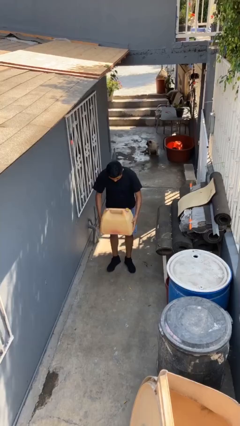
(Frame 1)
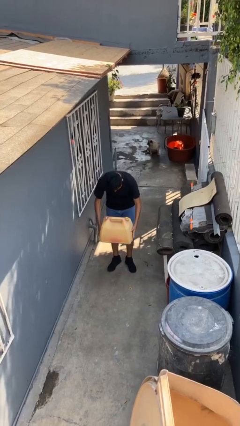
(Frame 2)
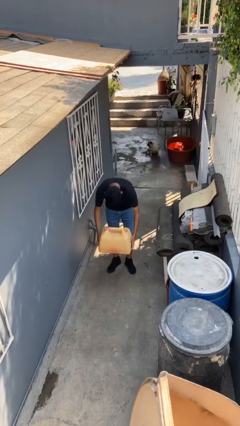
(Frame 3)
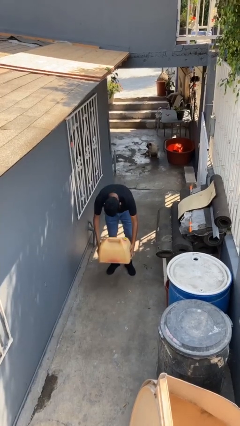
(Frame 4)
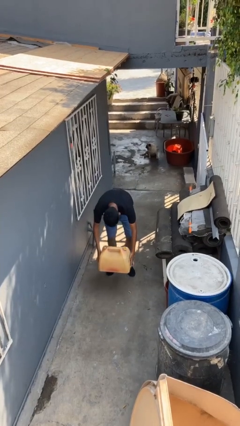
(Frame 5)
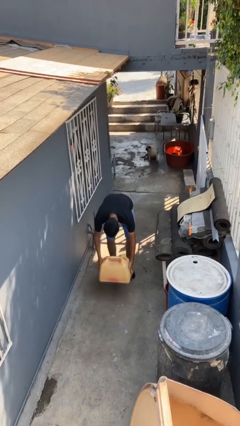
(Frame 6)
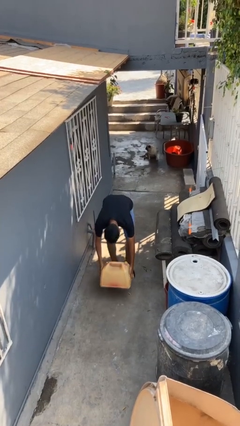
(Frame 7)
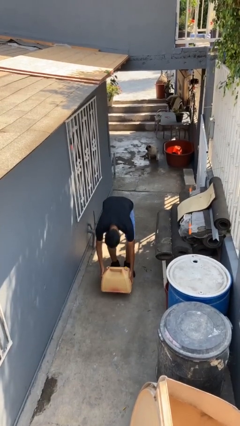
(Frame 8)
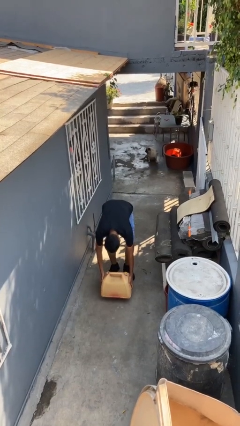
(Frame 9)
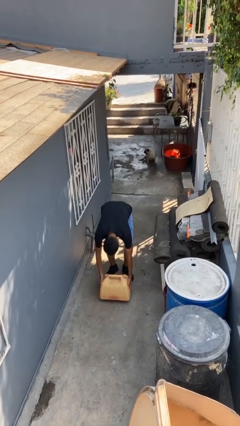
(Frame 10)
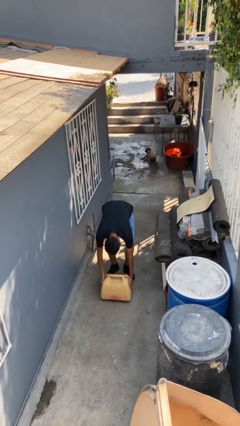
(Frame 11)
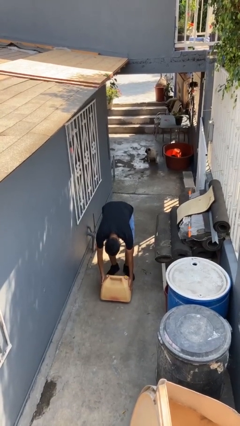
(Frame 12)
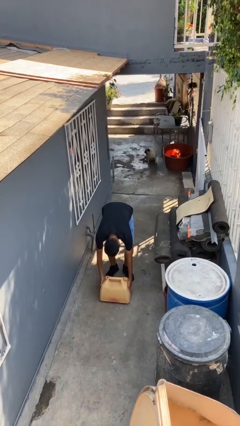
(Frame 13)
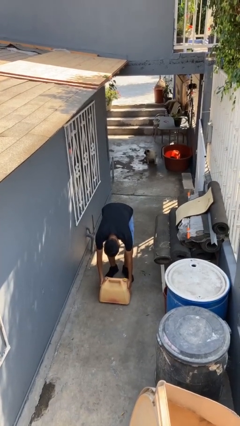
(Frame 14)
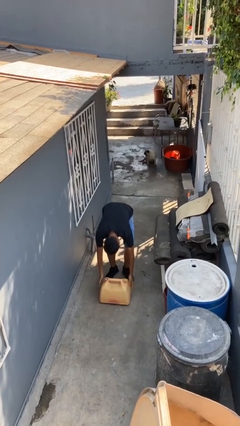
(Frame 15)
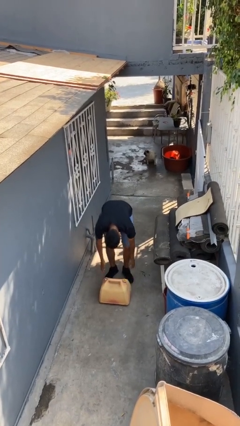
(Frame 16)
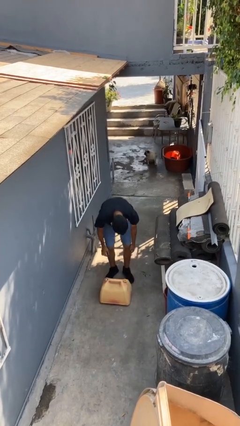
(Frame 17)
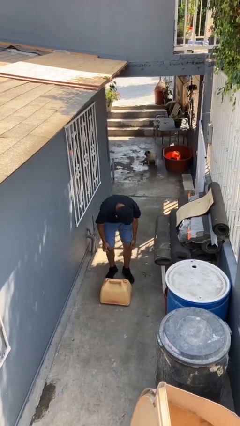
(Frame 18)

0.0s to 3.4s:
person puts down object on floor

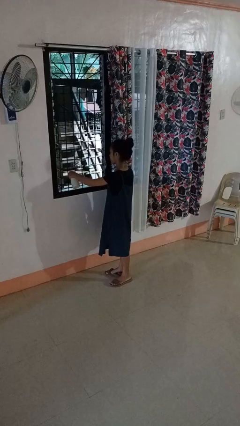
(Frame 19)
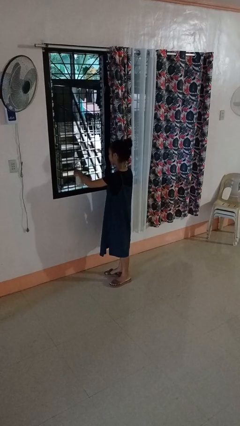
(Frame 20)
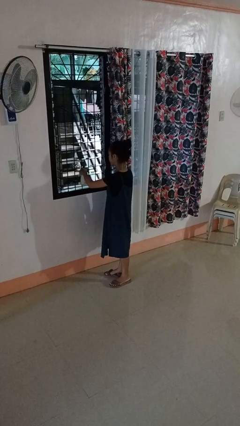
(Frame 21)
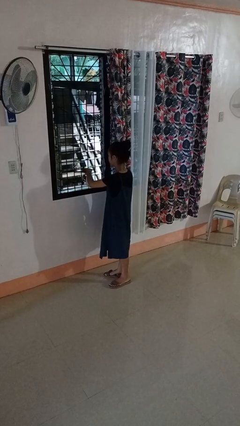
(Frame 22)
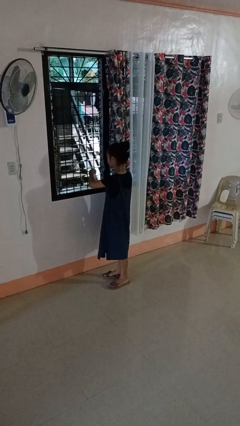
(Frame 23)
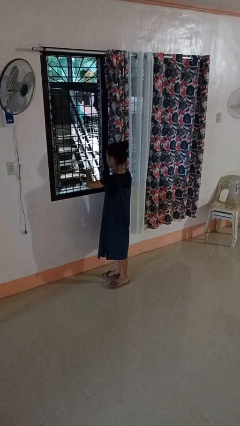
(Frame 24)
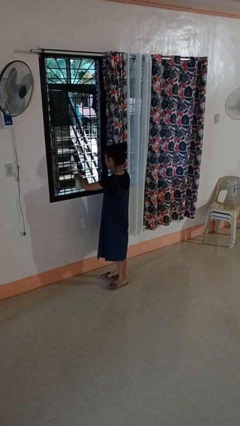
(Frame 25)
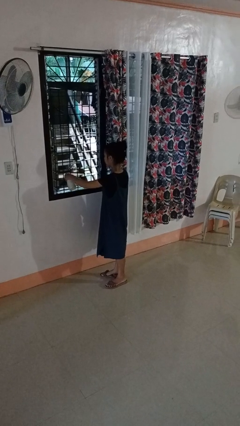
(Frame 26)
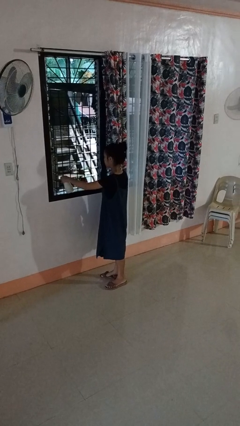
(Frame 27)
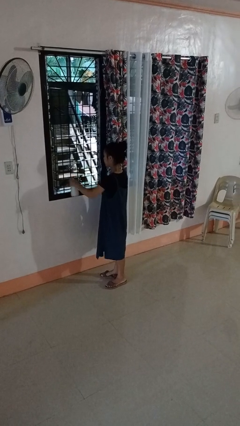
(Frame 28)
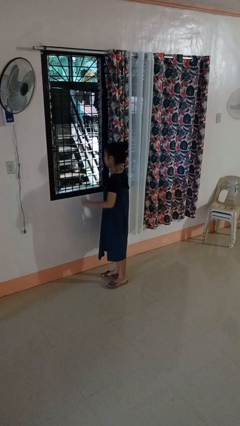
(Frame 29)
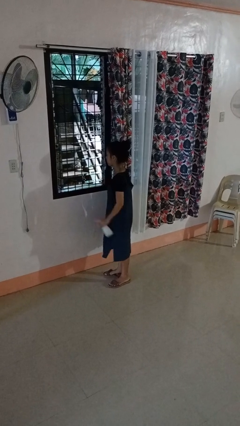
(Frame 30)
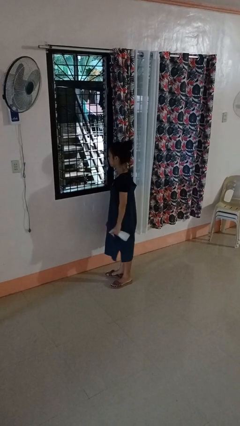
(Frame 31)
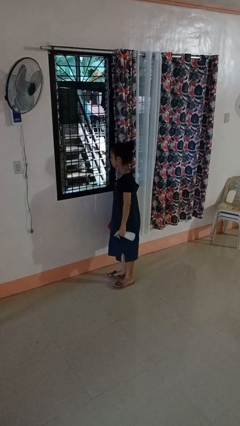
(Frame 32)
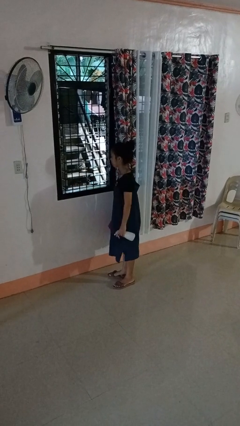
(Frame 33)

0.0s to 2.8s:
person sprays from bottle

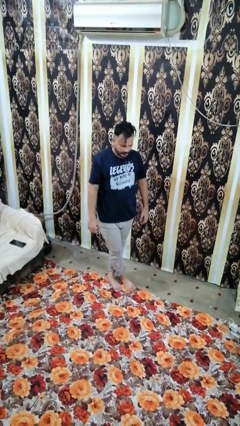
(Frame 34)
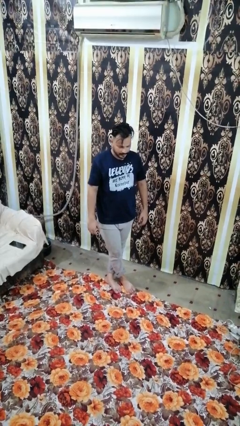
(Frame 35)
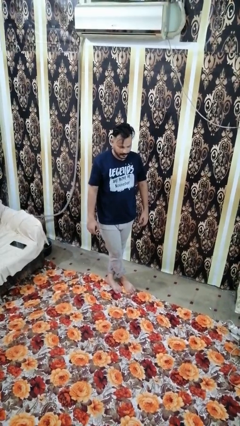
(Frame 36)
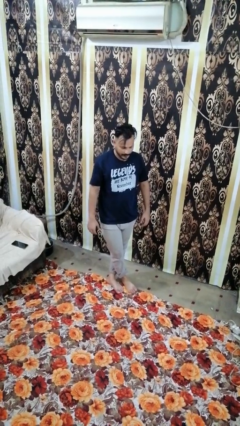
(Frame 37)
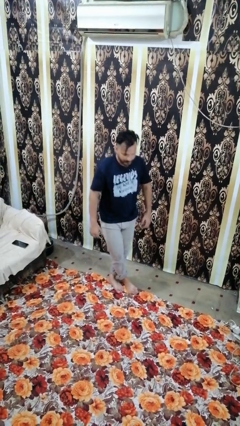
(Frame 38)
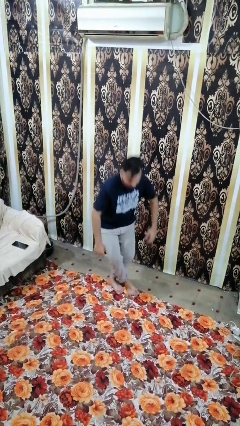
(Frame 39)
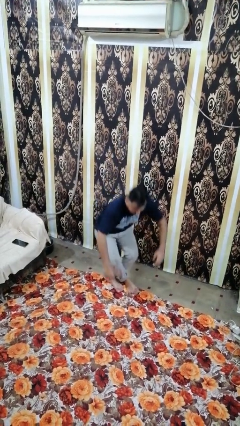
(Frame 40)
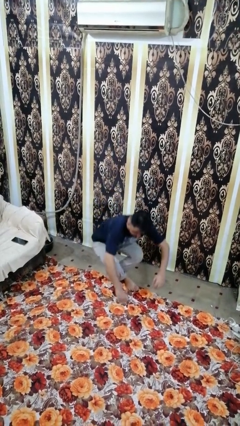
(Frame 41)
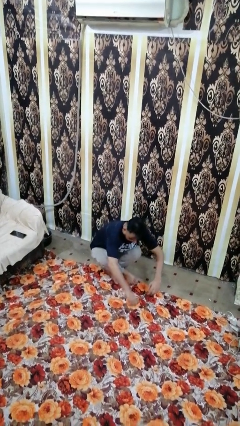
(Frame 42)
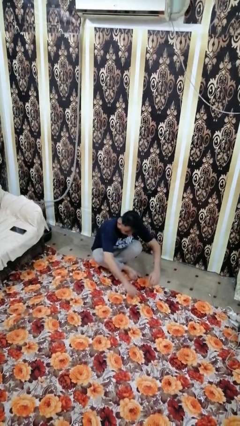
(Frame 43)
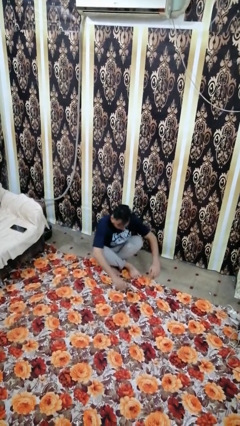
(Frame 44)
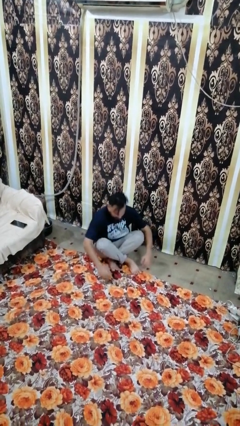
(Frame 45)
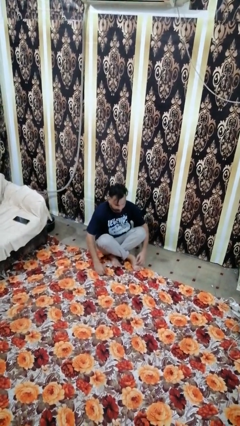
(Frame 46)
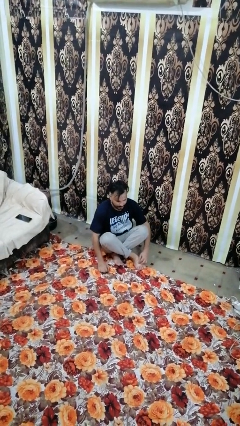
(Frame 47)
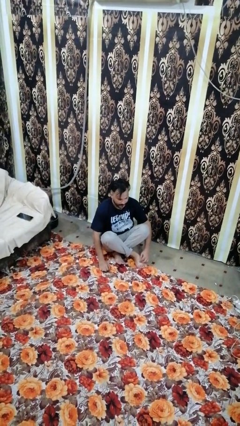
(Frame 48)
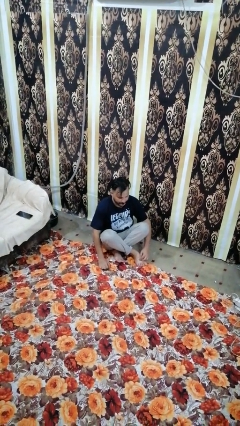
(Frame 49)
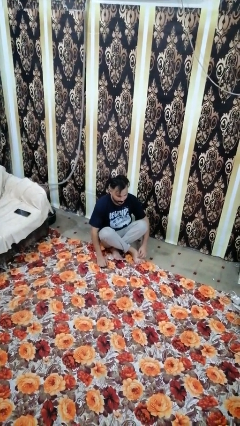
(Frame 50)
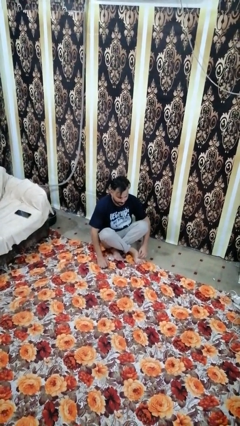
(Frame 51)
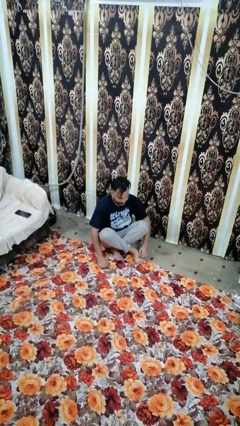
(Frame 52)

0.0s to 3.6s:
person sits crisscross

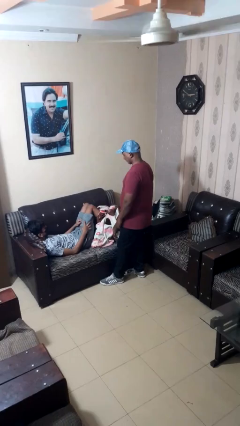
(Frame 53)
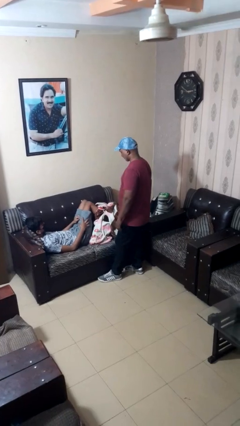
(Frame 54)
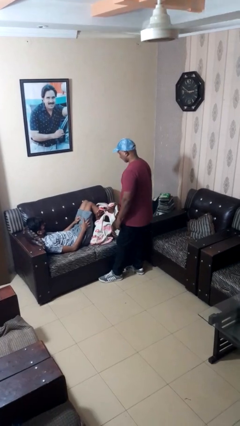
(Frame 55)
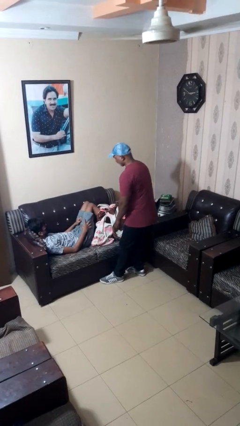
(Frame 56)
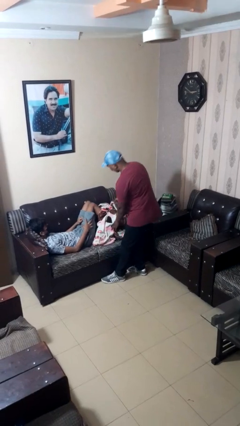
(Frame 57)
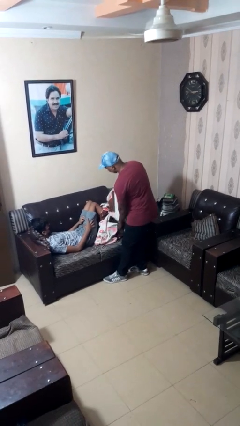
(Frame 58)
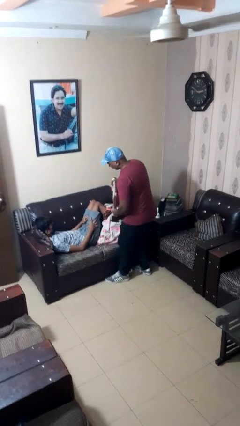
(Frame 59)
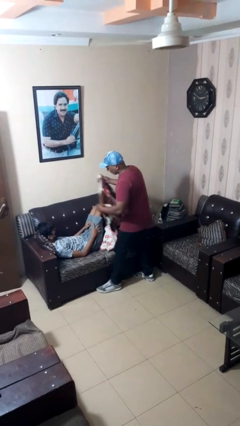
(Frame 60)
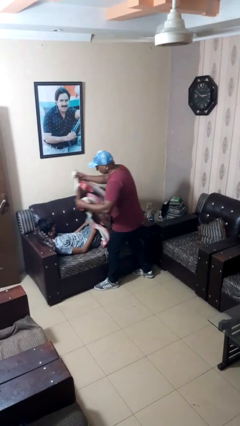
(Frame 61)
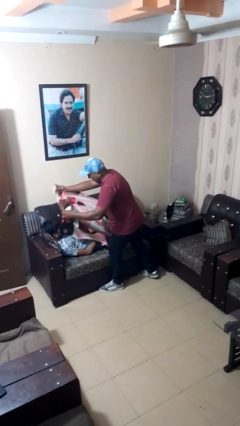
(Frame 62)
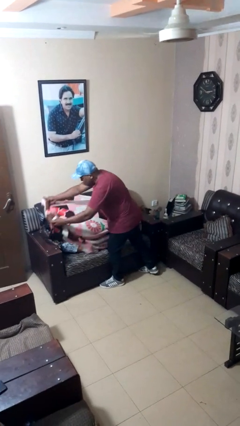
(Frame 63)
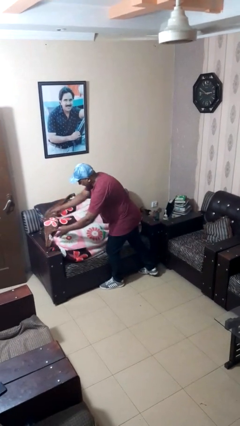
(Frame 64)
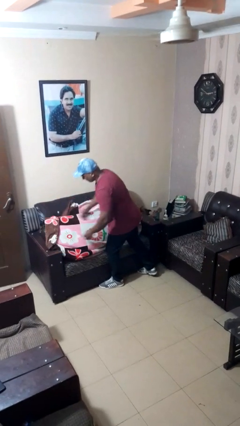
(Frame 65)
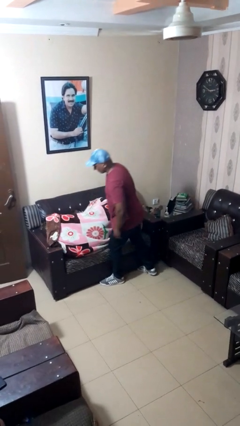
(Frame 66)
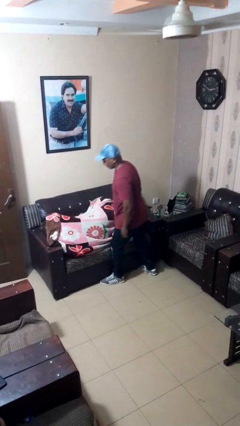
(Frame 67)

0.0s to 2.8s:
person covers friend with blanket

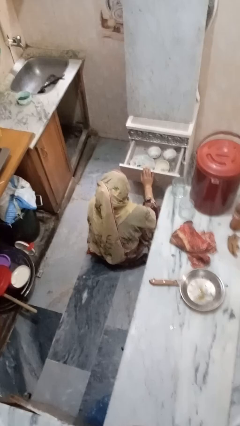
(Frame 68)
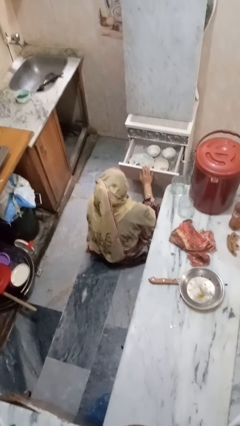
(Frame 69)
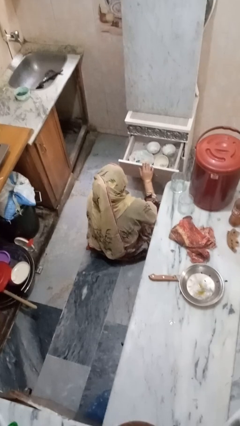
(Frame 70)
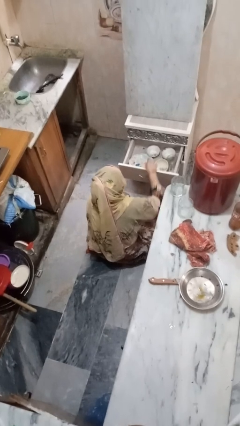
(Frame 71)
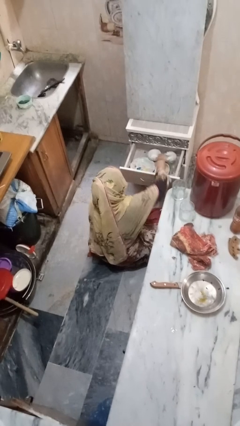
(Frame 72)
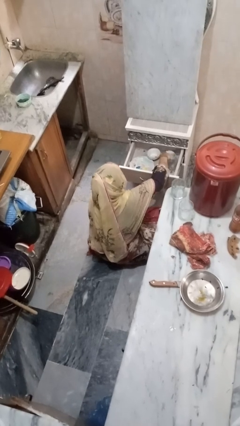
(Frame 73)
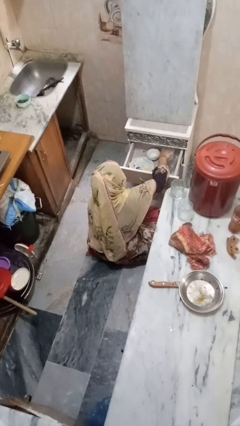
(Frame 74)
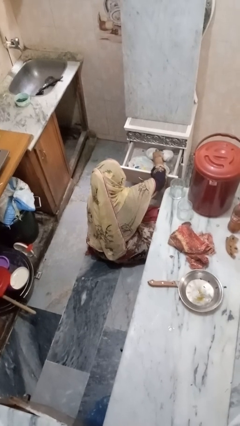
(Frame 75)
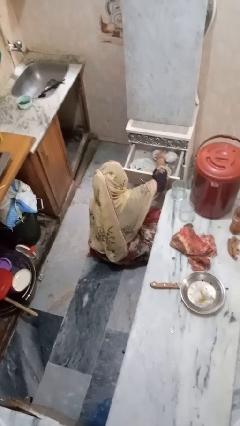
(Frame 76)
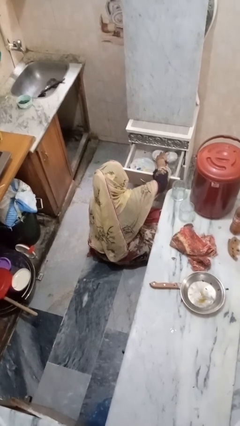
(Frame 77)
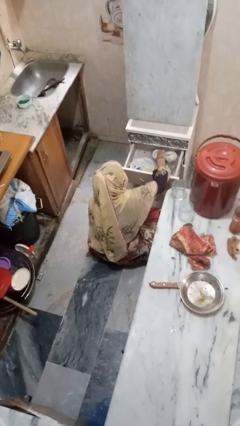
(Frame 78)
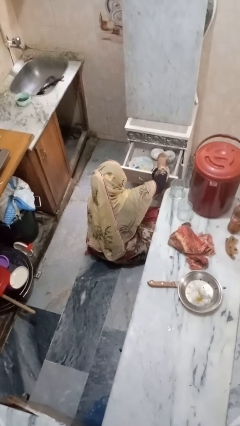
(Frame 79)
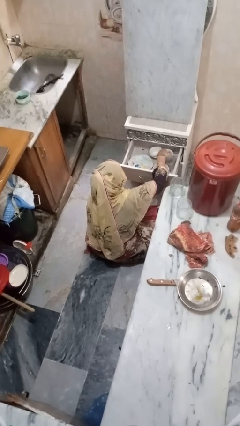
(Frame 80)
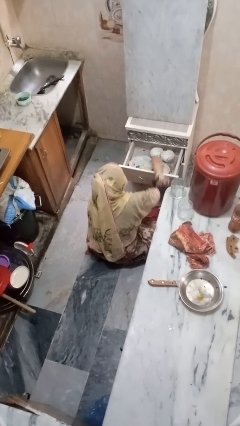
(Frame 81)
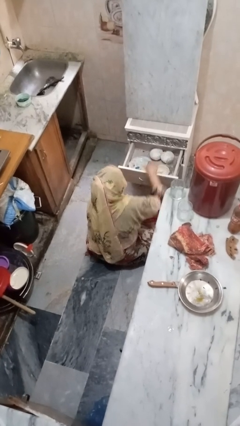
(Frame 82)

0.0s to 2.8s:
person searches in kitchen drawer

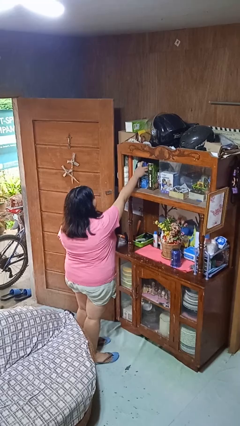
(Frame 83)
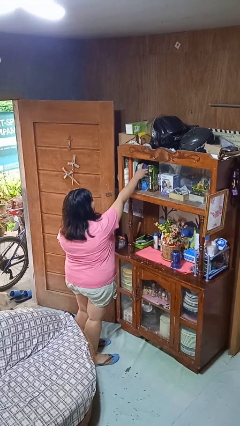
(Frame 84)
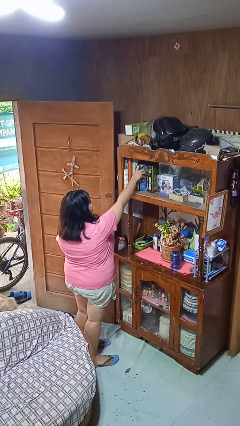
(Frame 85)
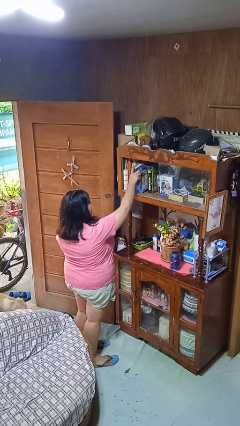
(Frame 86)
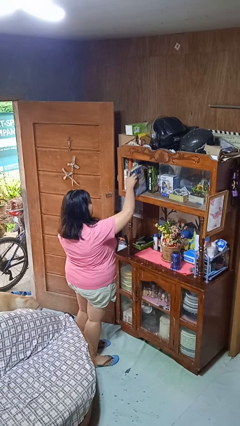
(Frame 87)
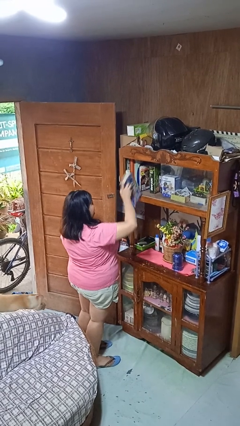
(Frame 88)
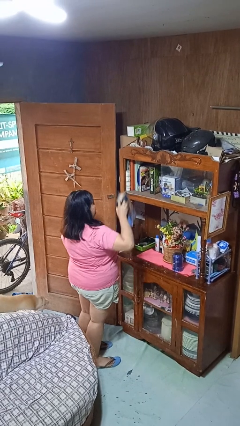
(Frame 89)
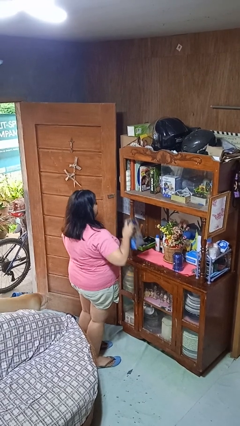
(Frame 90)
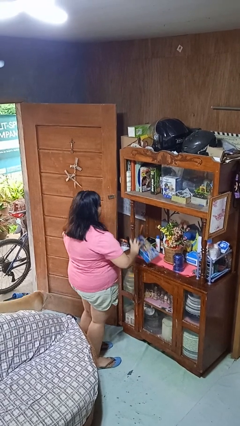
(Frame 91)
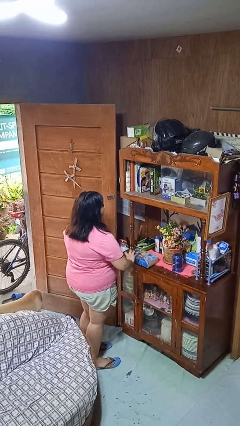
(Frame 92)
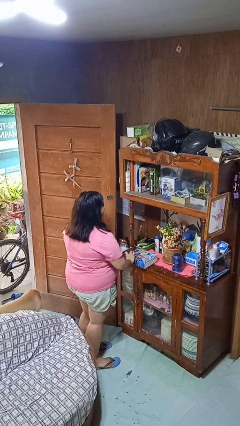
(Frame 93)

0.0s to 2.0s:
person picks up object from shelf

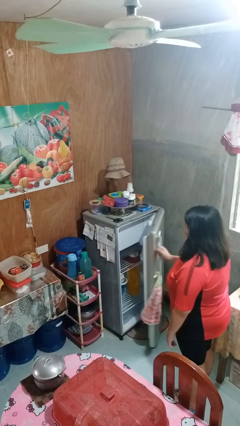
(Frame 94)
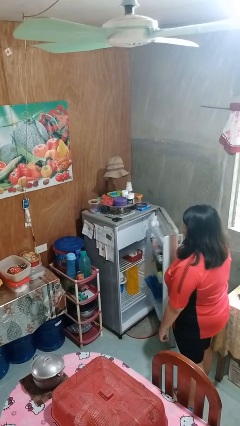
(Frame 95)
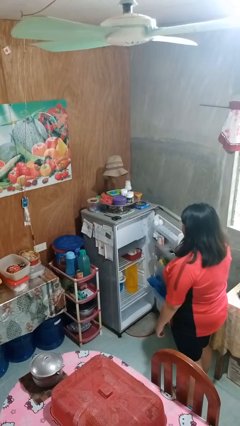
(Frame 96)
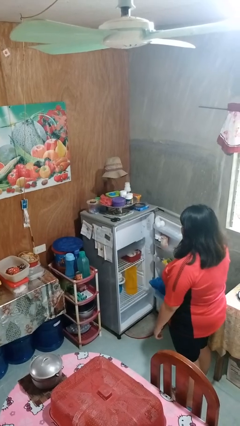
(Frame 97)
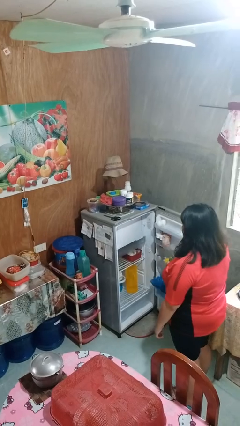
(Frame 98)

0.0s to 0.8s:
person opens refrigerator
